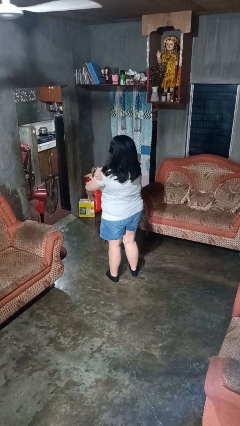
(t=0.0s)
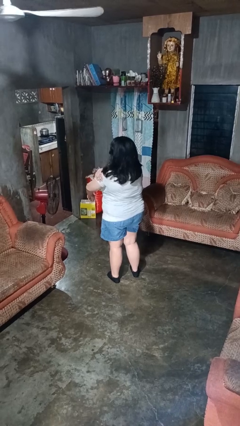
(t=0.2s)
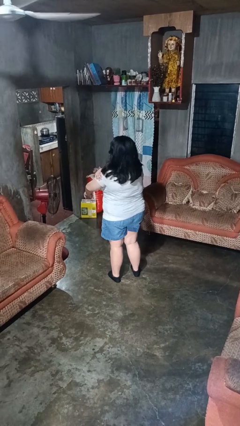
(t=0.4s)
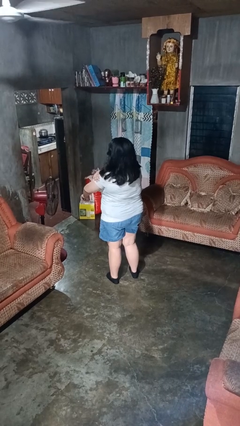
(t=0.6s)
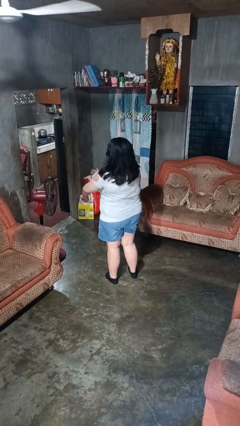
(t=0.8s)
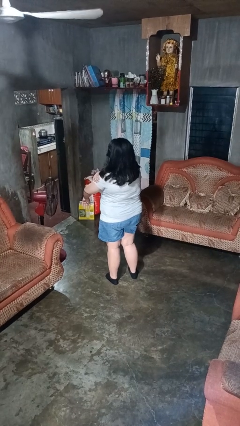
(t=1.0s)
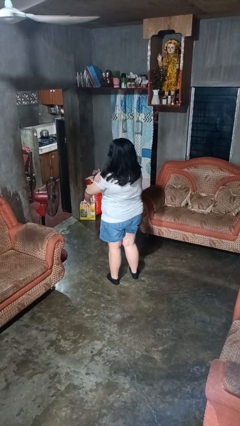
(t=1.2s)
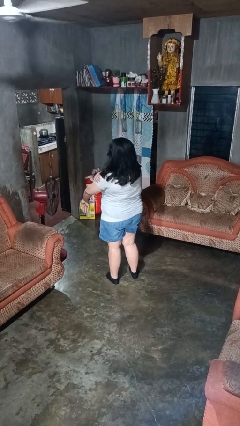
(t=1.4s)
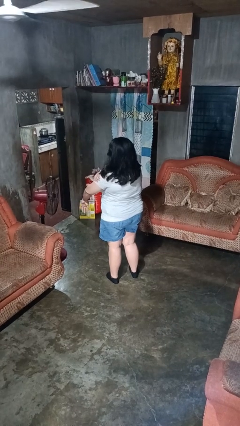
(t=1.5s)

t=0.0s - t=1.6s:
person swats bug

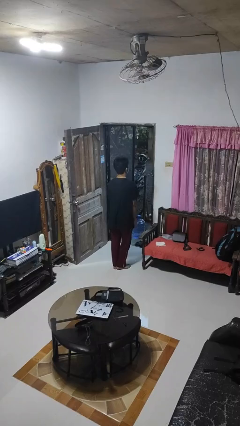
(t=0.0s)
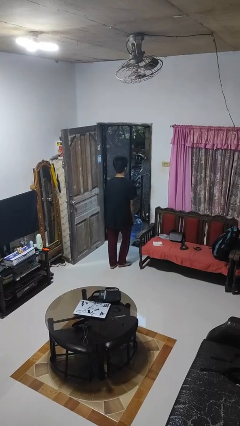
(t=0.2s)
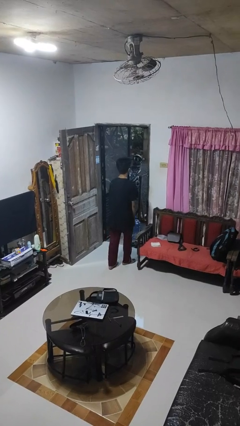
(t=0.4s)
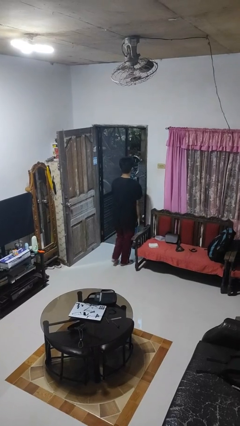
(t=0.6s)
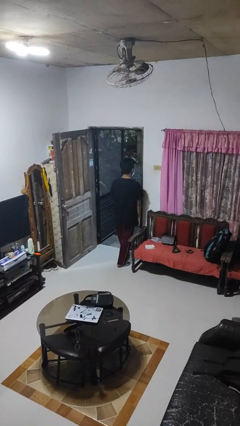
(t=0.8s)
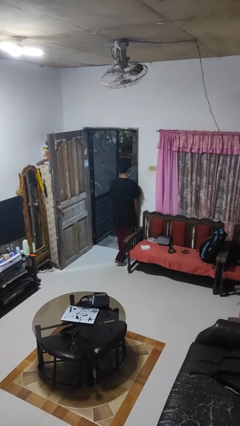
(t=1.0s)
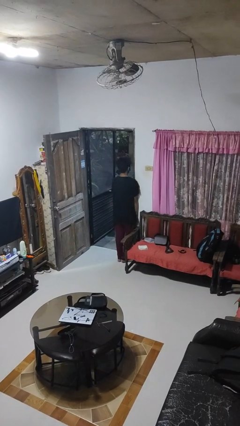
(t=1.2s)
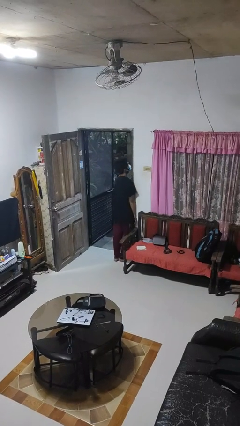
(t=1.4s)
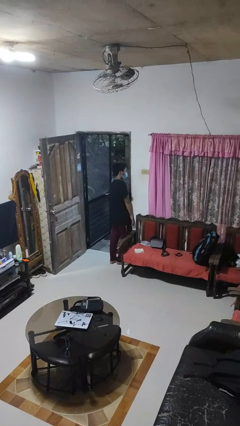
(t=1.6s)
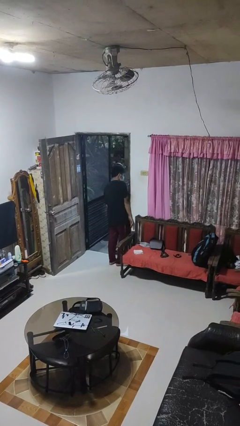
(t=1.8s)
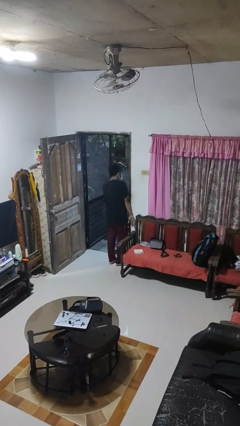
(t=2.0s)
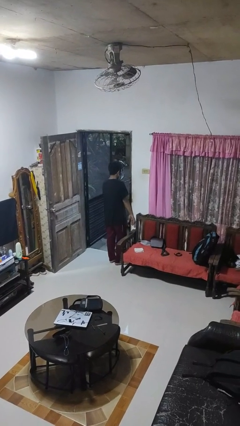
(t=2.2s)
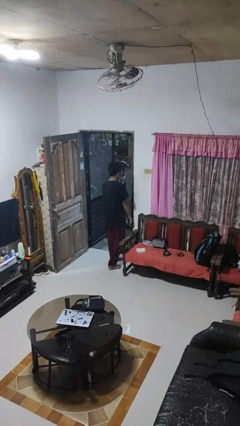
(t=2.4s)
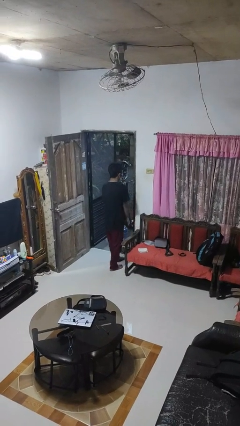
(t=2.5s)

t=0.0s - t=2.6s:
person bumps into wall

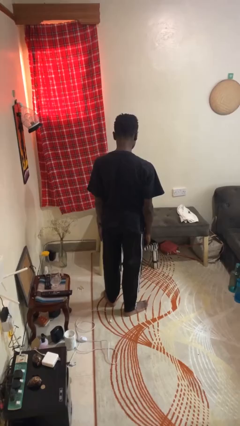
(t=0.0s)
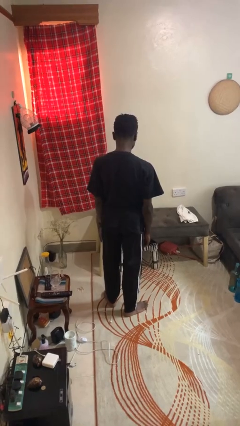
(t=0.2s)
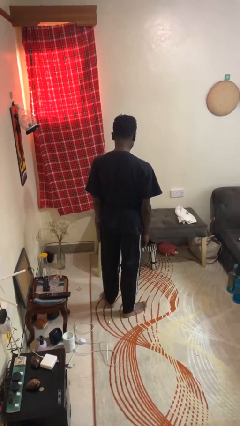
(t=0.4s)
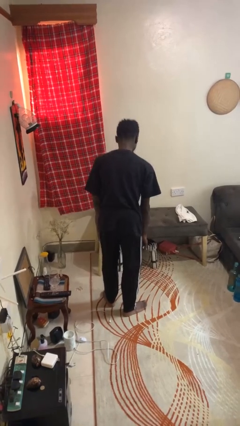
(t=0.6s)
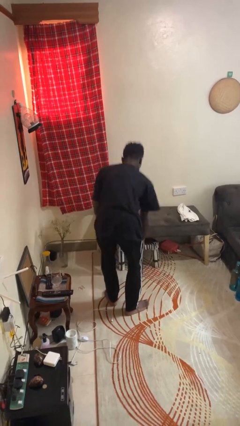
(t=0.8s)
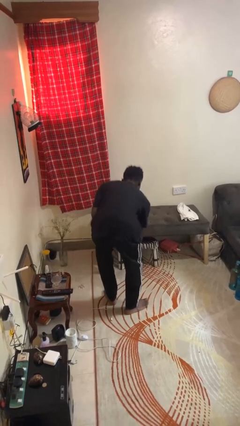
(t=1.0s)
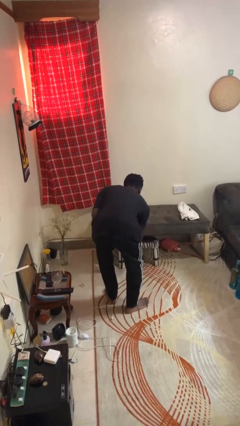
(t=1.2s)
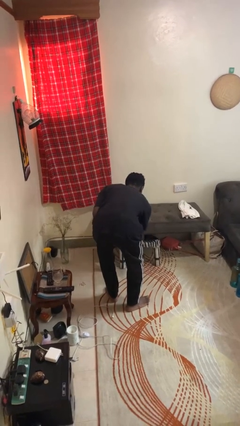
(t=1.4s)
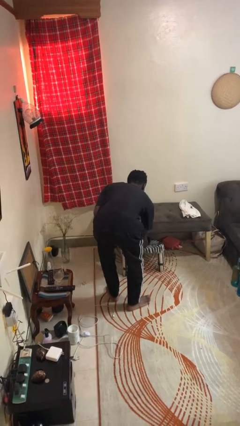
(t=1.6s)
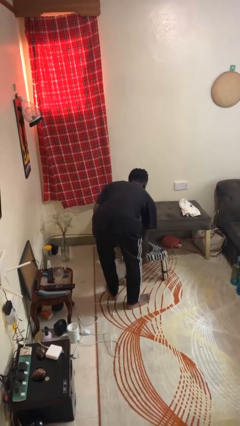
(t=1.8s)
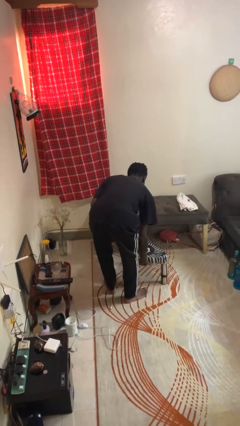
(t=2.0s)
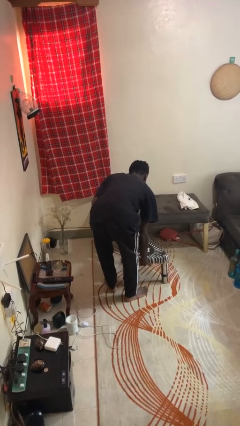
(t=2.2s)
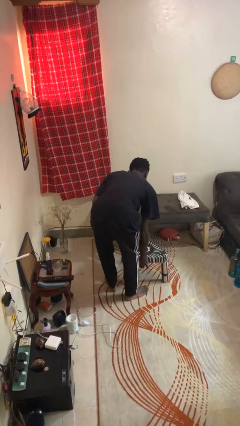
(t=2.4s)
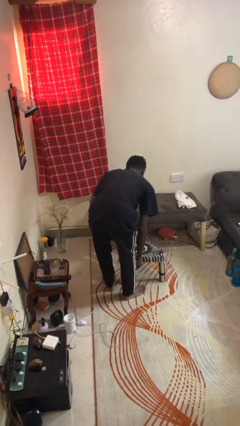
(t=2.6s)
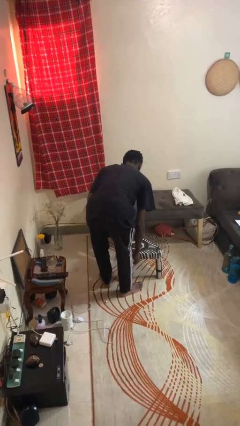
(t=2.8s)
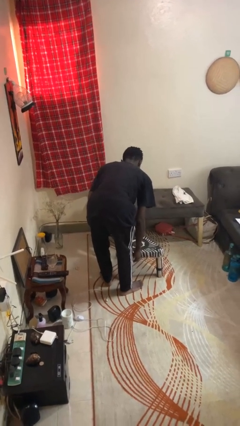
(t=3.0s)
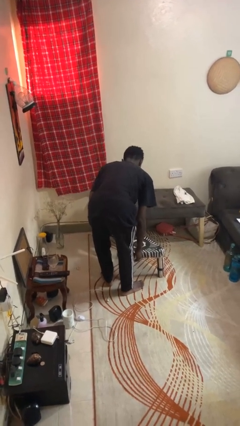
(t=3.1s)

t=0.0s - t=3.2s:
person pulls out chair

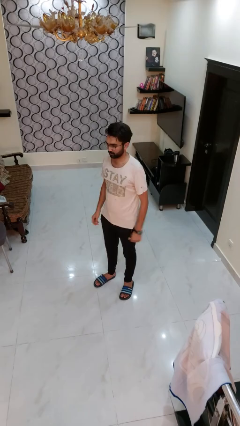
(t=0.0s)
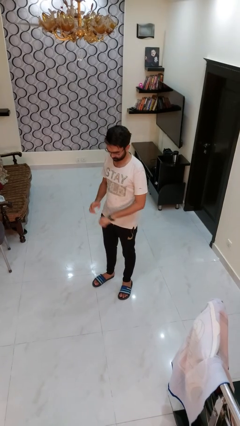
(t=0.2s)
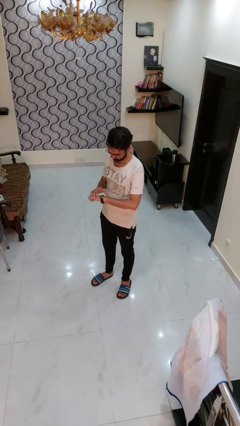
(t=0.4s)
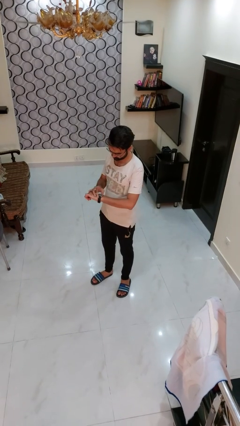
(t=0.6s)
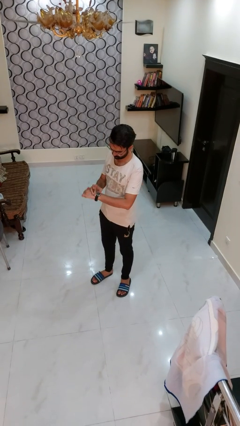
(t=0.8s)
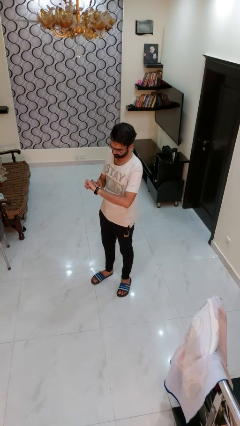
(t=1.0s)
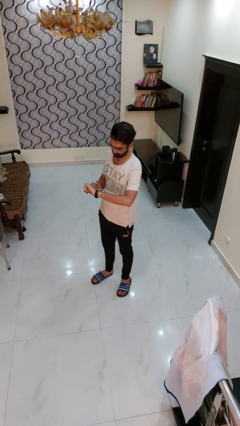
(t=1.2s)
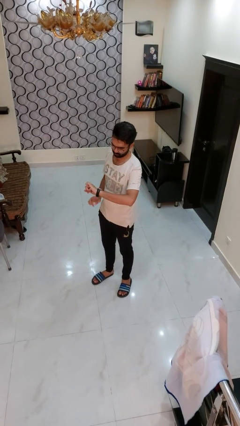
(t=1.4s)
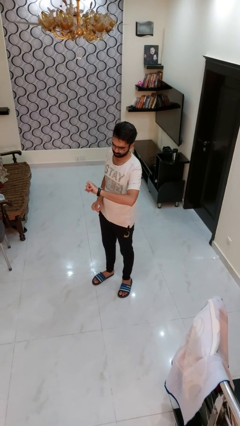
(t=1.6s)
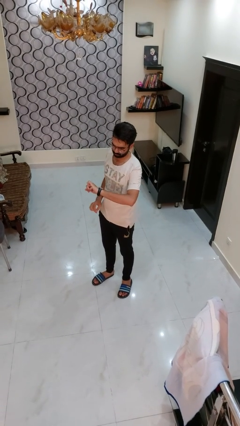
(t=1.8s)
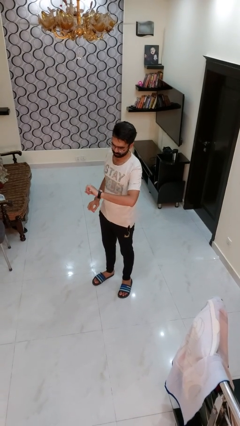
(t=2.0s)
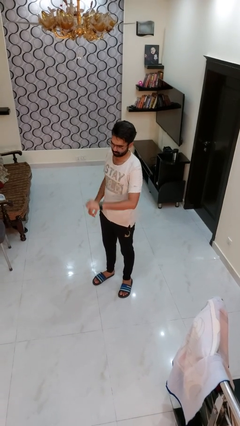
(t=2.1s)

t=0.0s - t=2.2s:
person looks at wristwatch

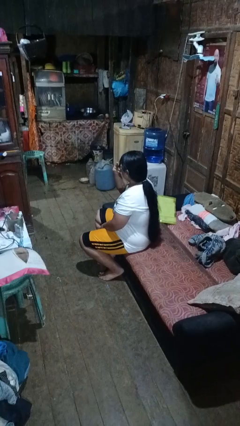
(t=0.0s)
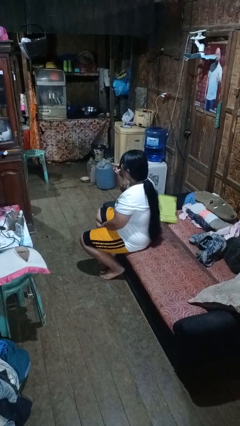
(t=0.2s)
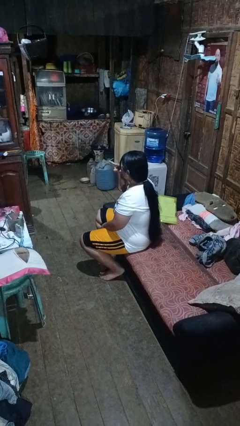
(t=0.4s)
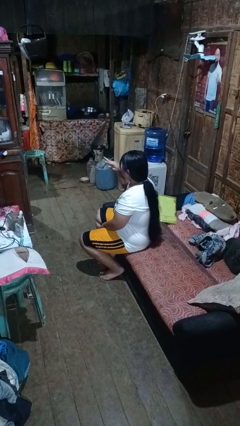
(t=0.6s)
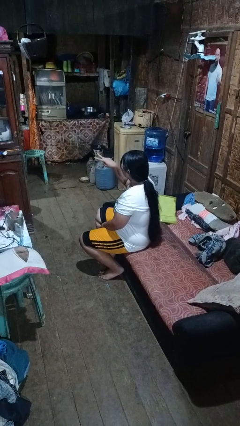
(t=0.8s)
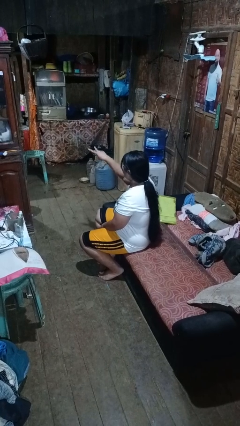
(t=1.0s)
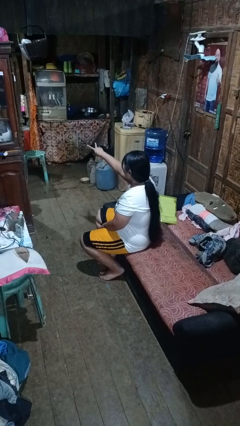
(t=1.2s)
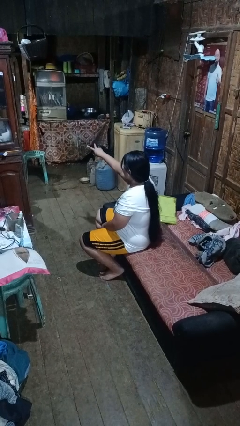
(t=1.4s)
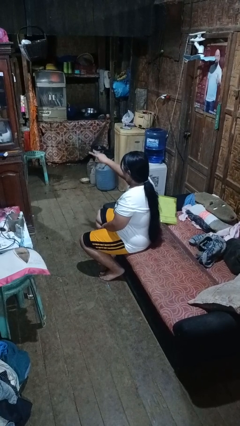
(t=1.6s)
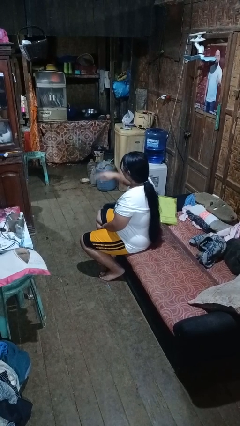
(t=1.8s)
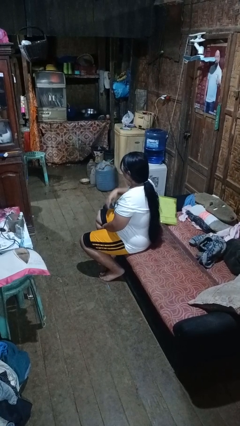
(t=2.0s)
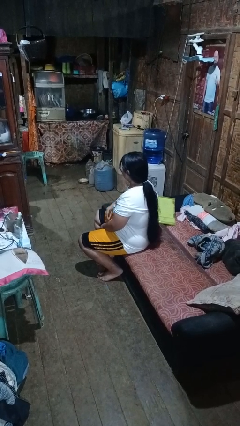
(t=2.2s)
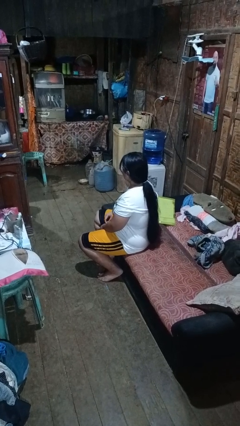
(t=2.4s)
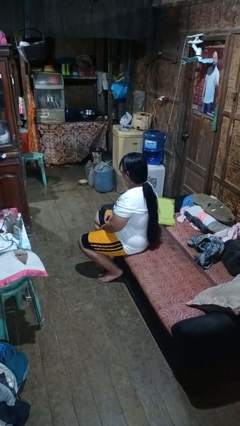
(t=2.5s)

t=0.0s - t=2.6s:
person gestures watch closely

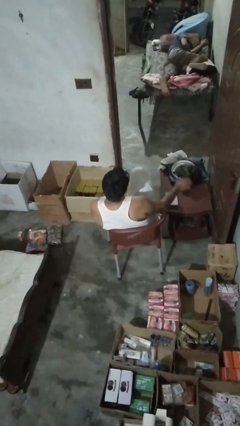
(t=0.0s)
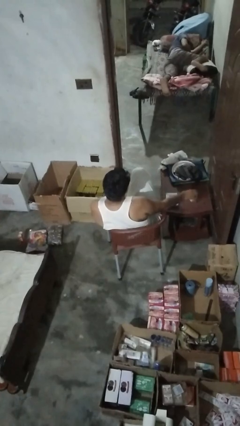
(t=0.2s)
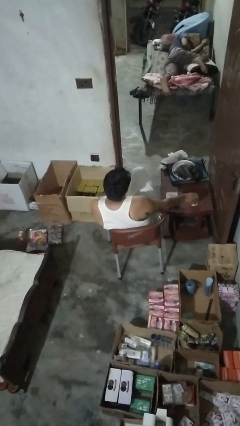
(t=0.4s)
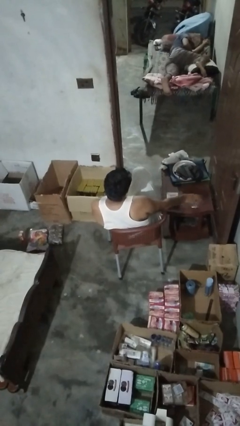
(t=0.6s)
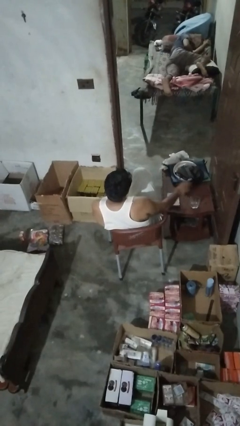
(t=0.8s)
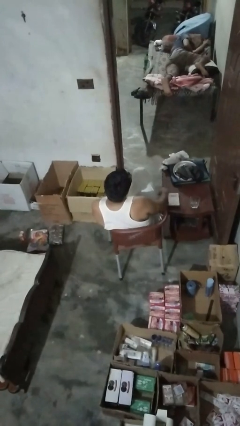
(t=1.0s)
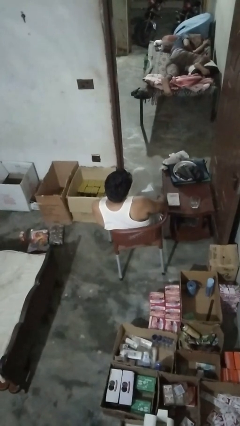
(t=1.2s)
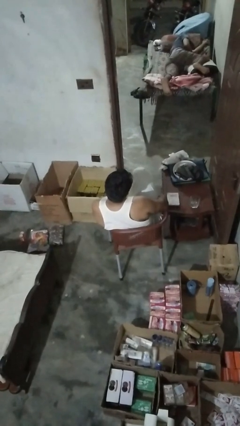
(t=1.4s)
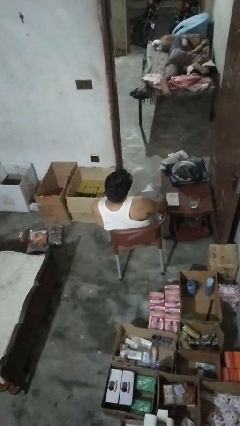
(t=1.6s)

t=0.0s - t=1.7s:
person sets upright glass

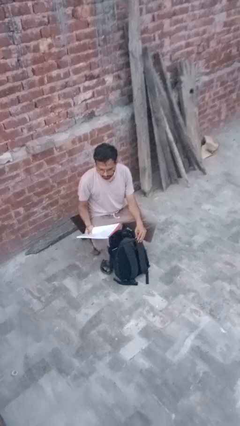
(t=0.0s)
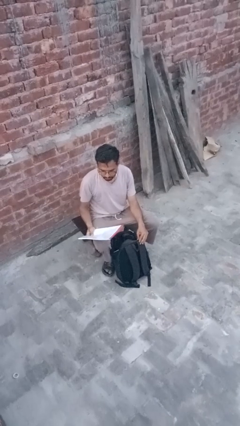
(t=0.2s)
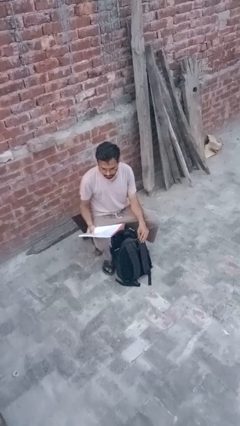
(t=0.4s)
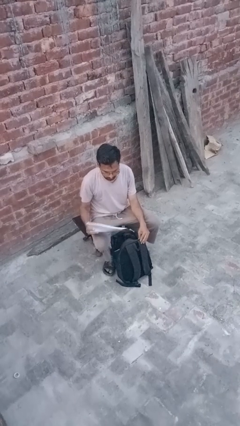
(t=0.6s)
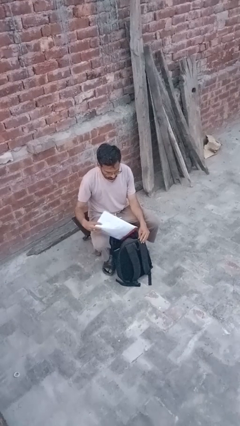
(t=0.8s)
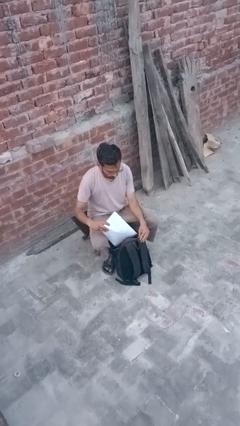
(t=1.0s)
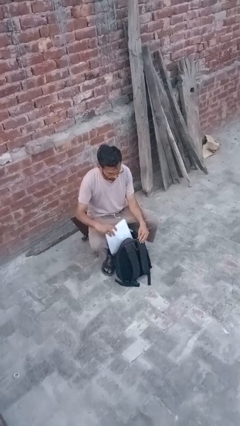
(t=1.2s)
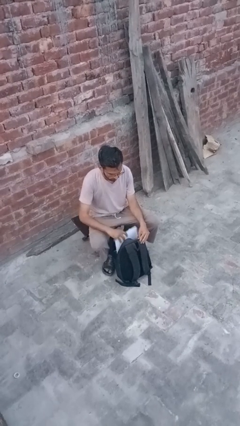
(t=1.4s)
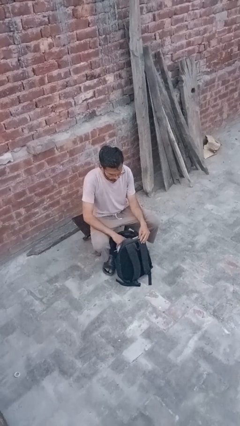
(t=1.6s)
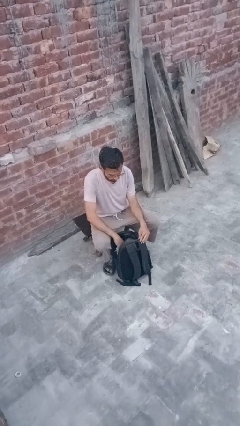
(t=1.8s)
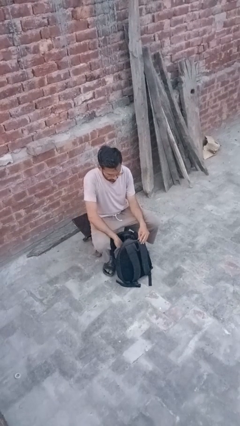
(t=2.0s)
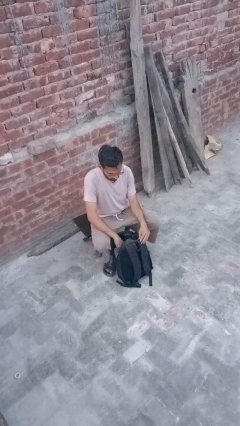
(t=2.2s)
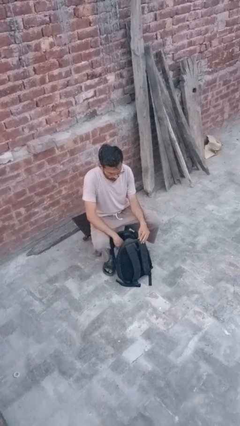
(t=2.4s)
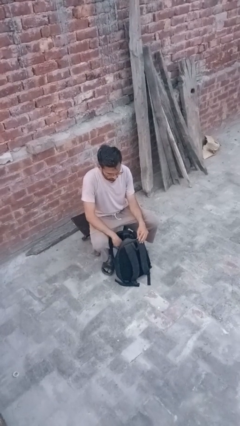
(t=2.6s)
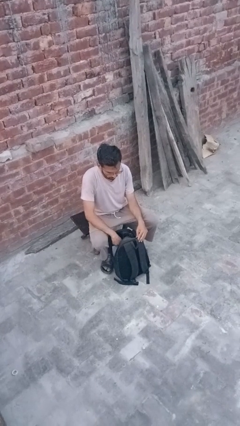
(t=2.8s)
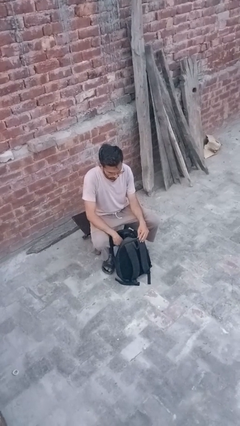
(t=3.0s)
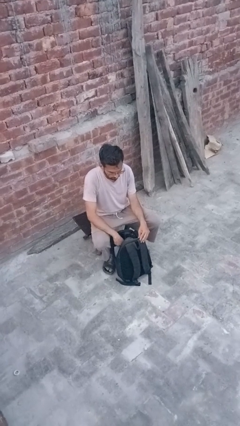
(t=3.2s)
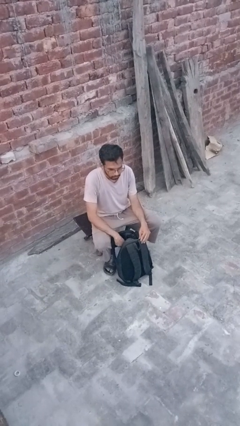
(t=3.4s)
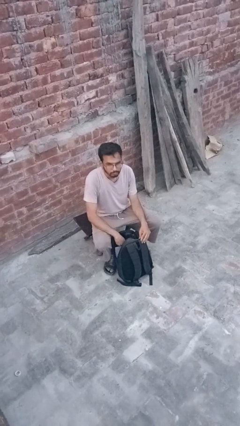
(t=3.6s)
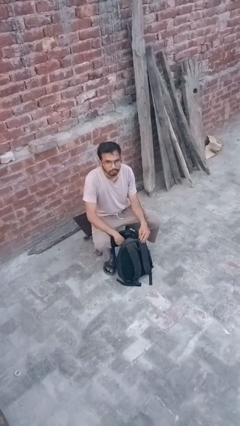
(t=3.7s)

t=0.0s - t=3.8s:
person puts object into backpack
